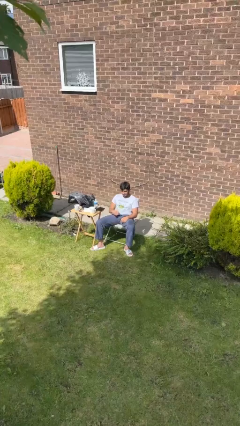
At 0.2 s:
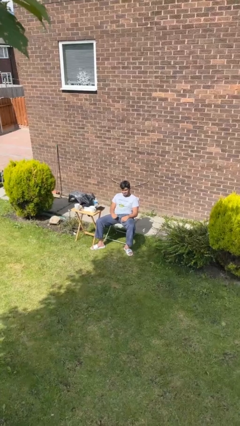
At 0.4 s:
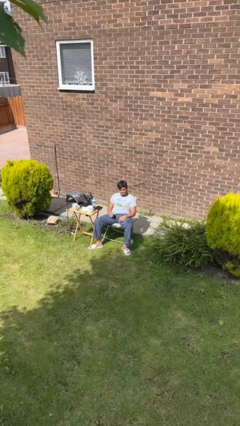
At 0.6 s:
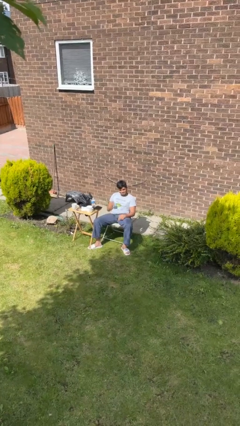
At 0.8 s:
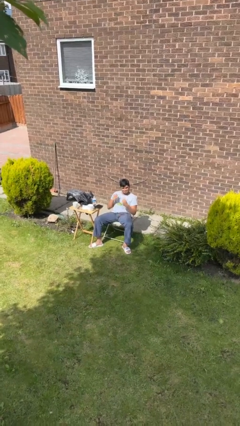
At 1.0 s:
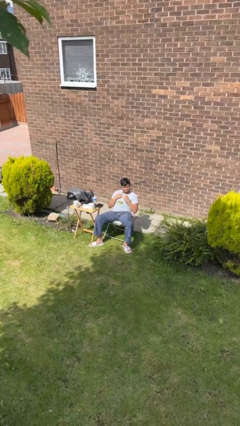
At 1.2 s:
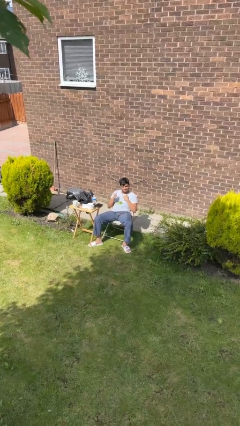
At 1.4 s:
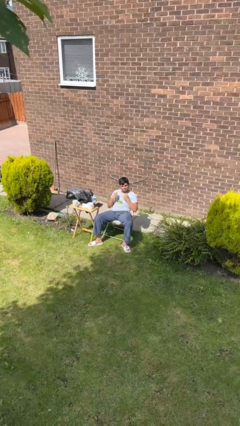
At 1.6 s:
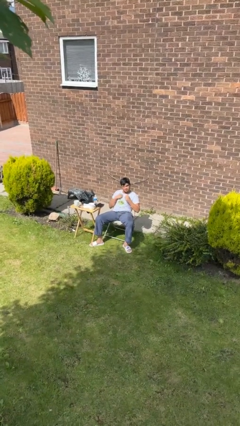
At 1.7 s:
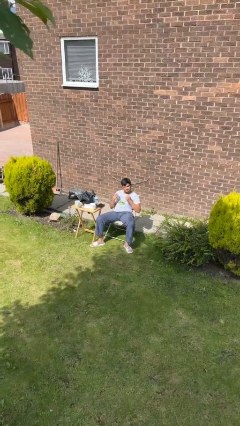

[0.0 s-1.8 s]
person drums on chest

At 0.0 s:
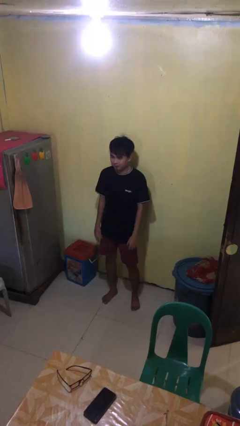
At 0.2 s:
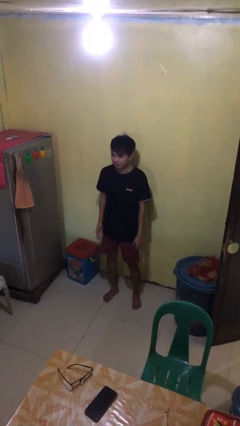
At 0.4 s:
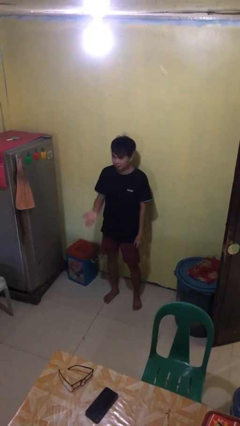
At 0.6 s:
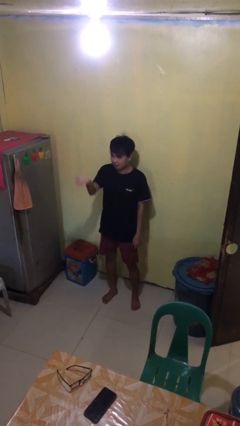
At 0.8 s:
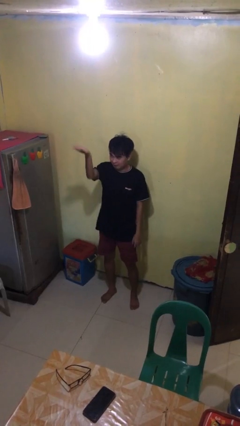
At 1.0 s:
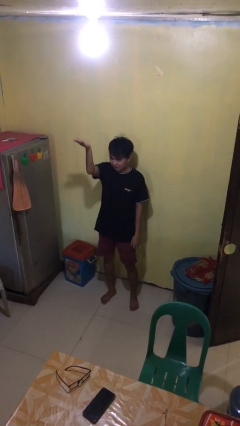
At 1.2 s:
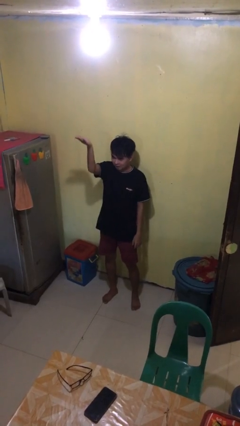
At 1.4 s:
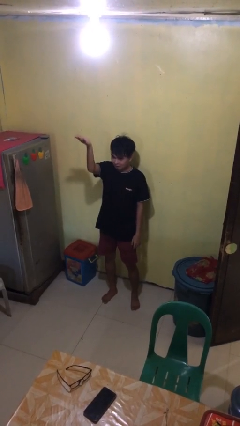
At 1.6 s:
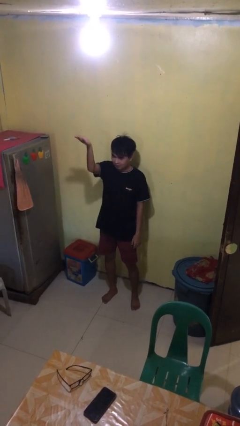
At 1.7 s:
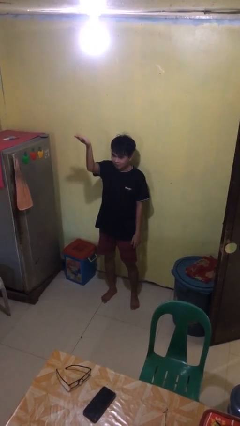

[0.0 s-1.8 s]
person gestures swipe up

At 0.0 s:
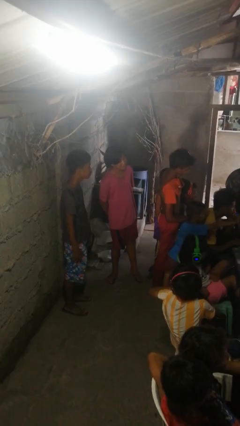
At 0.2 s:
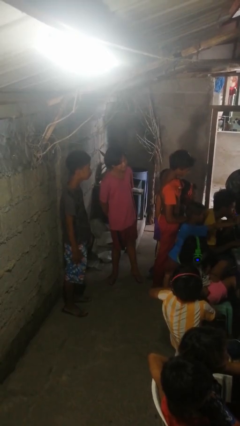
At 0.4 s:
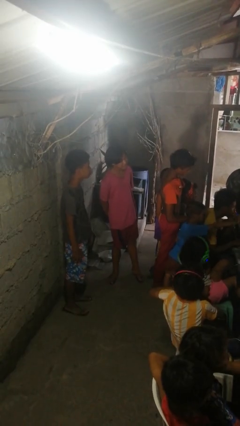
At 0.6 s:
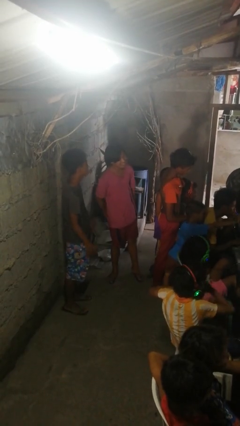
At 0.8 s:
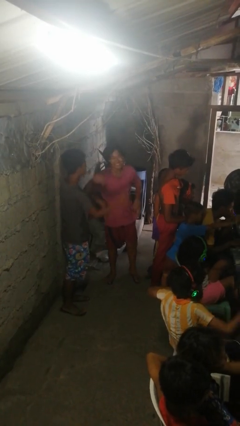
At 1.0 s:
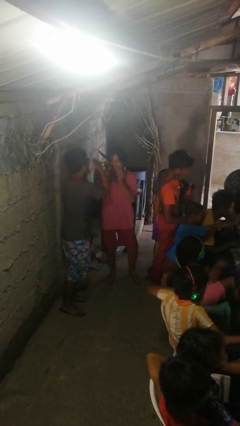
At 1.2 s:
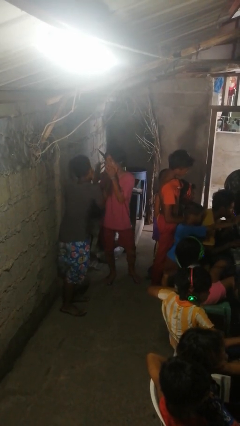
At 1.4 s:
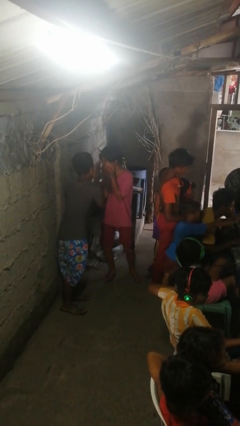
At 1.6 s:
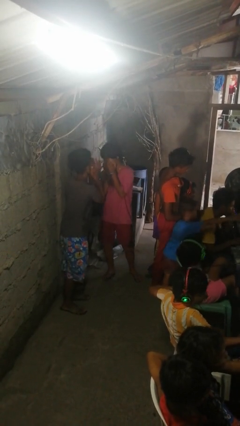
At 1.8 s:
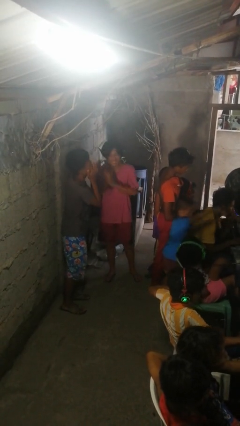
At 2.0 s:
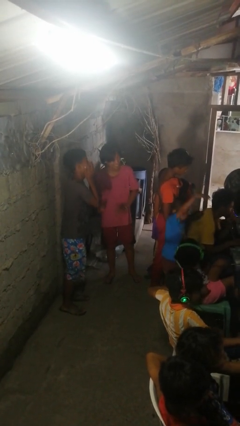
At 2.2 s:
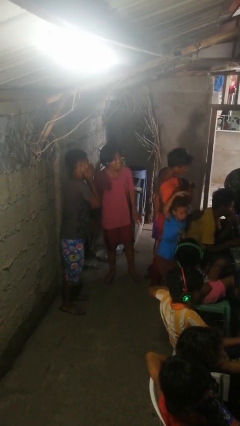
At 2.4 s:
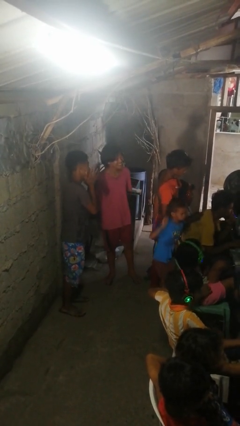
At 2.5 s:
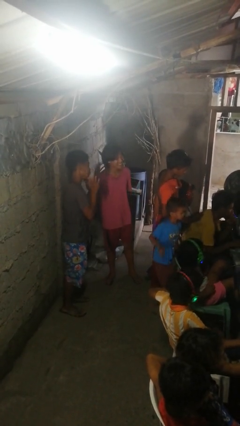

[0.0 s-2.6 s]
person laughs with person

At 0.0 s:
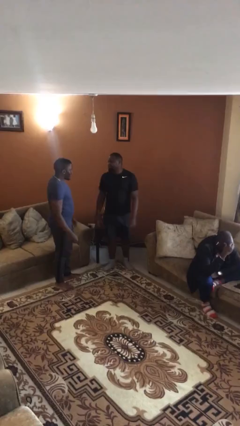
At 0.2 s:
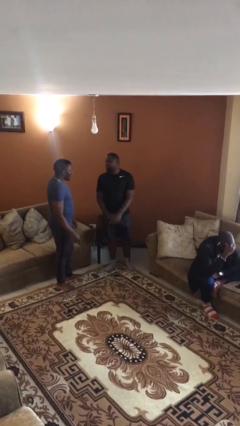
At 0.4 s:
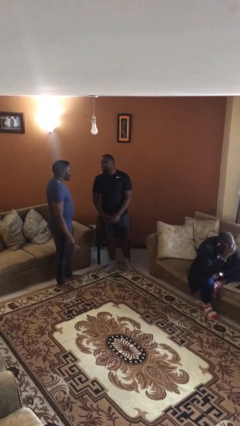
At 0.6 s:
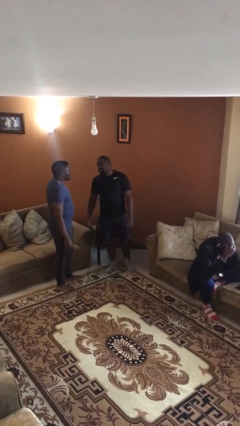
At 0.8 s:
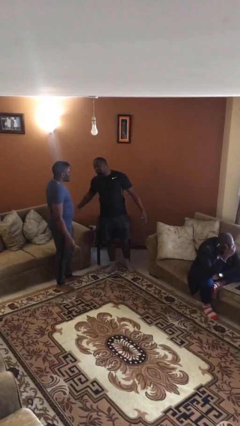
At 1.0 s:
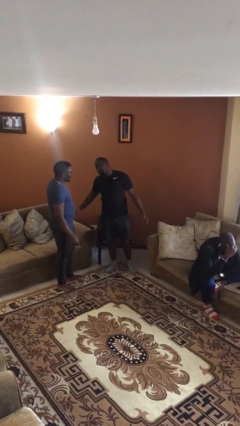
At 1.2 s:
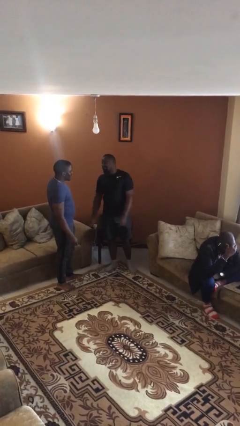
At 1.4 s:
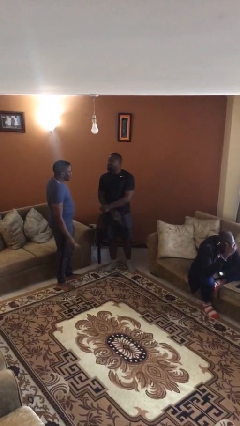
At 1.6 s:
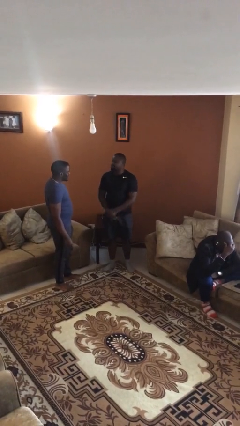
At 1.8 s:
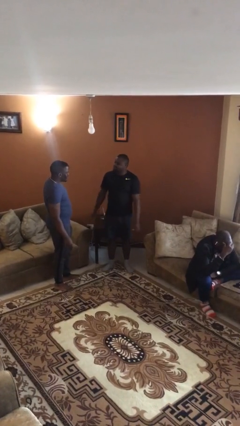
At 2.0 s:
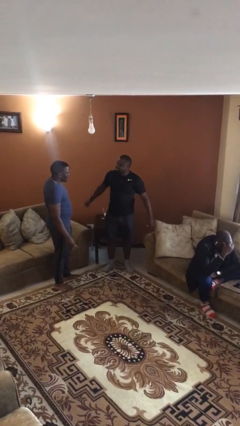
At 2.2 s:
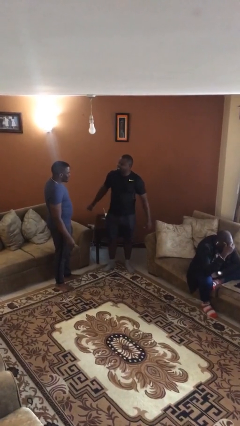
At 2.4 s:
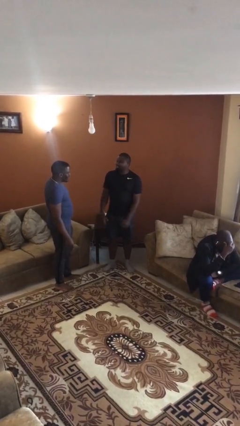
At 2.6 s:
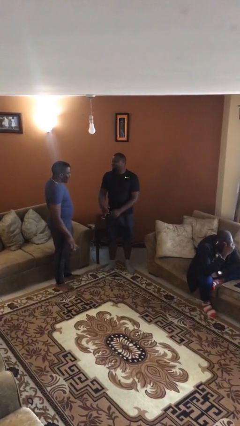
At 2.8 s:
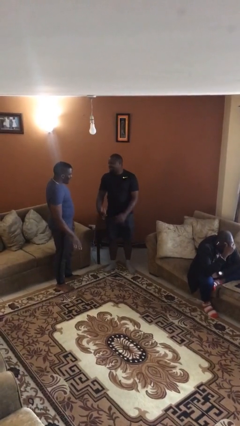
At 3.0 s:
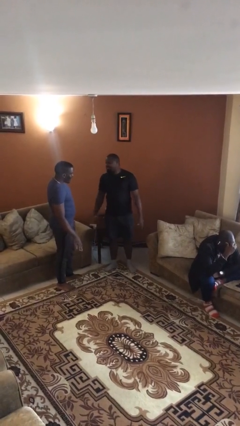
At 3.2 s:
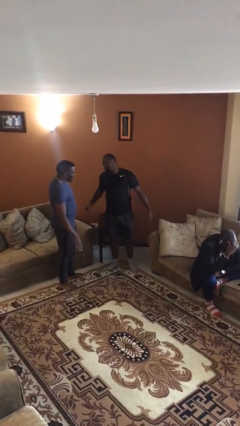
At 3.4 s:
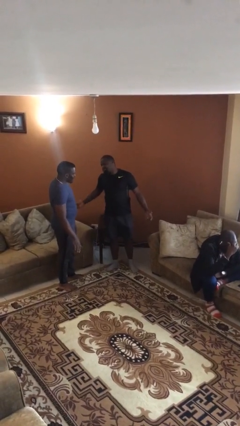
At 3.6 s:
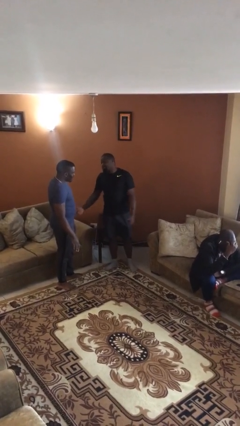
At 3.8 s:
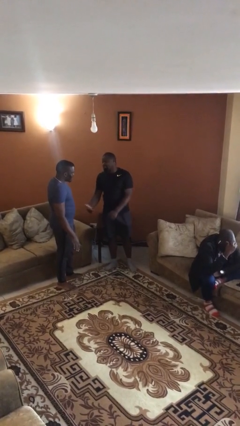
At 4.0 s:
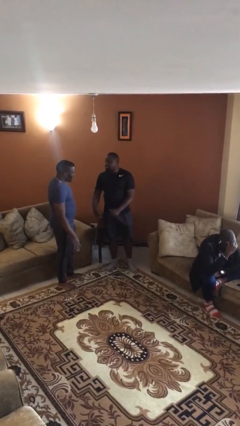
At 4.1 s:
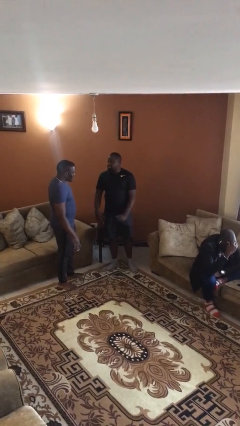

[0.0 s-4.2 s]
person talks to person

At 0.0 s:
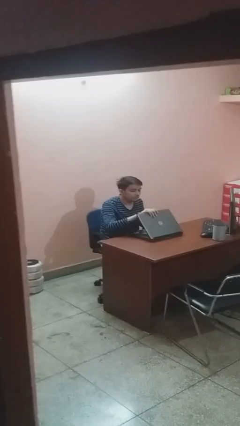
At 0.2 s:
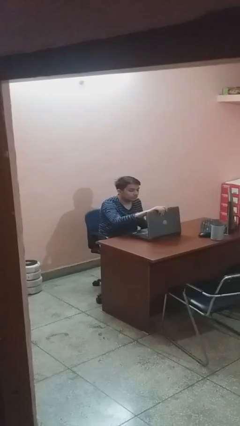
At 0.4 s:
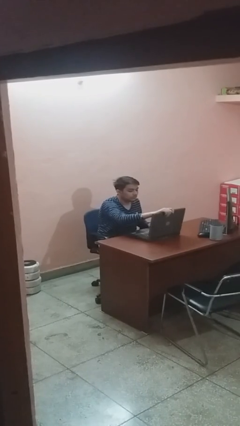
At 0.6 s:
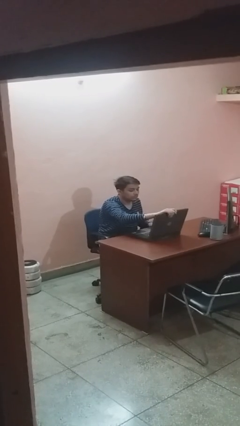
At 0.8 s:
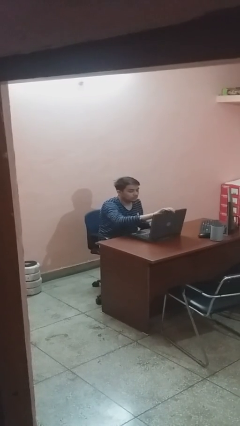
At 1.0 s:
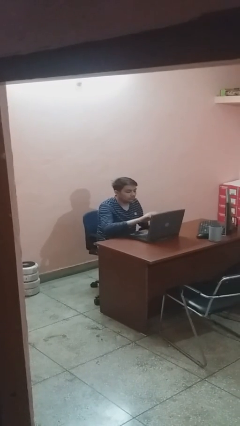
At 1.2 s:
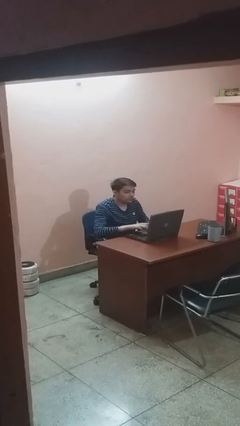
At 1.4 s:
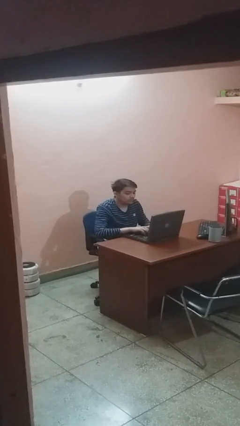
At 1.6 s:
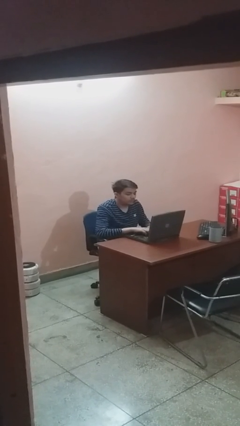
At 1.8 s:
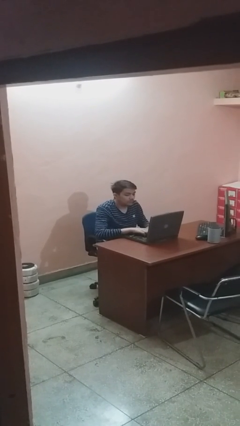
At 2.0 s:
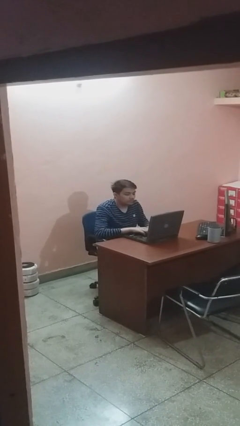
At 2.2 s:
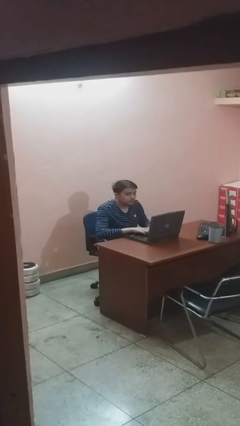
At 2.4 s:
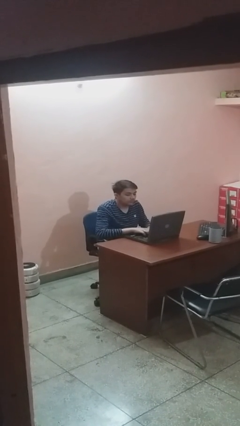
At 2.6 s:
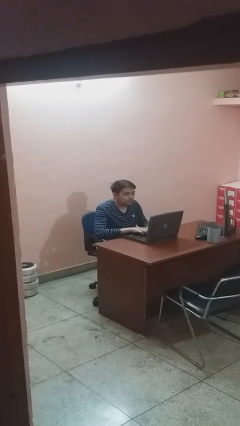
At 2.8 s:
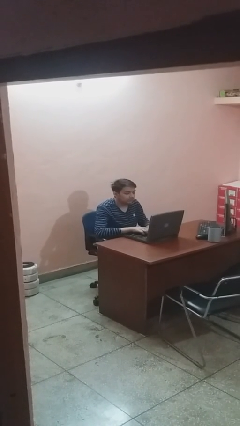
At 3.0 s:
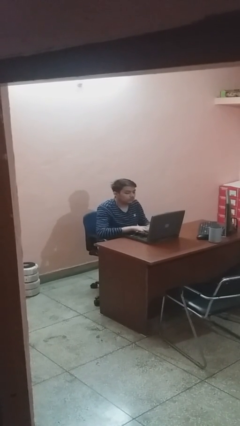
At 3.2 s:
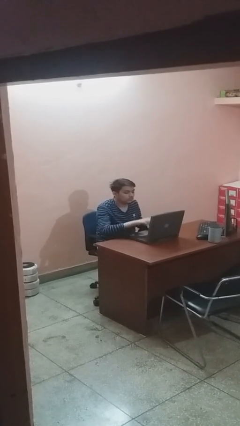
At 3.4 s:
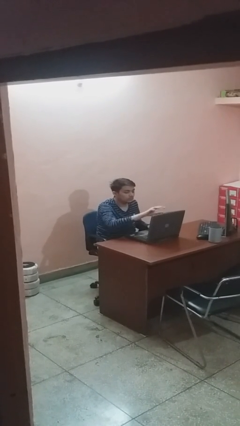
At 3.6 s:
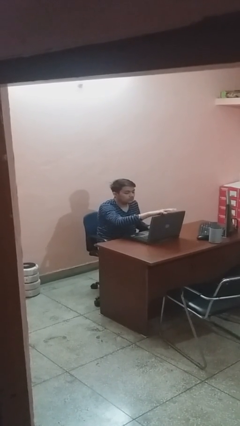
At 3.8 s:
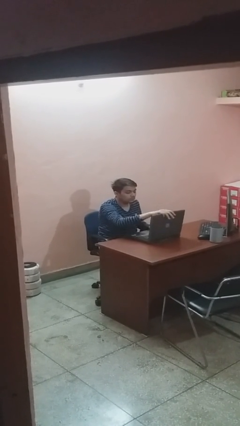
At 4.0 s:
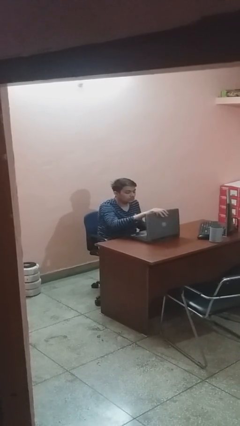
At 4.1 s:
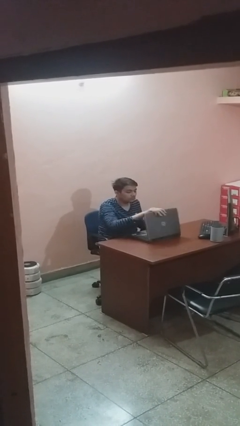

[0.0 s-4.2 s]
person interacts with laptop

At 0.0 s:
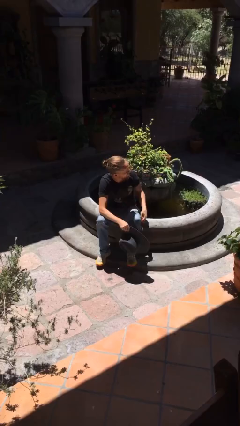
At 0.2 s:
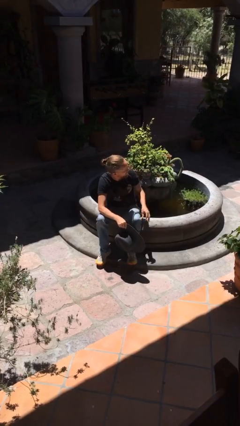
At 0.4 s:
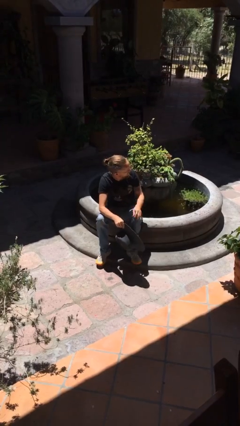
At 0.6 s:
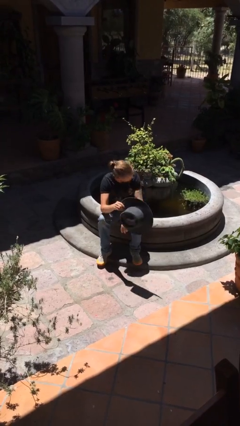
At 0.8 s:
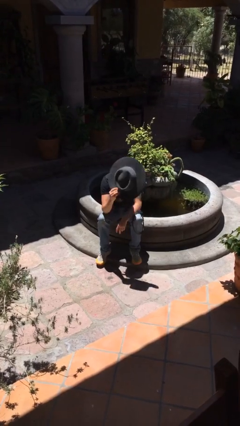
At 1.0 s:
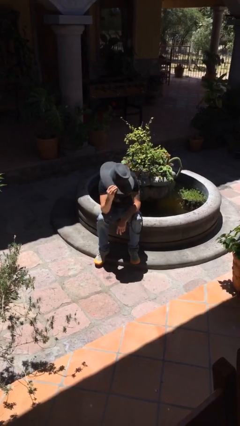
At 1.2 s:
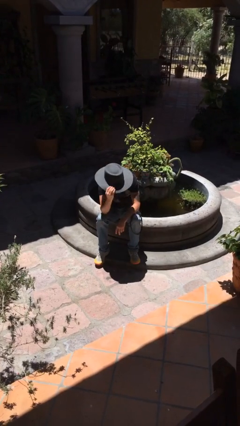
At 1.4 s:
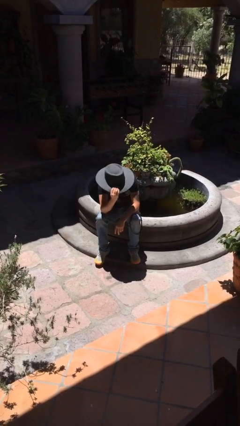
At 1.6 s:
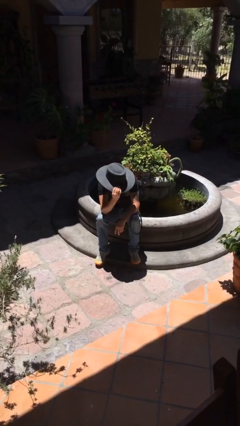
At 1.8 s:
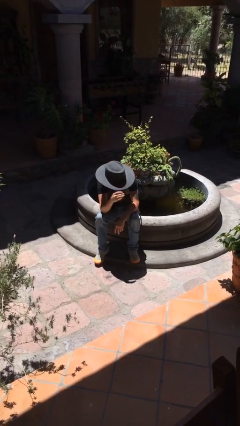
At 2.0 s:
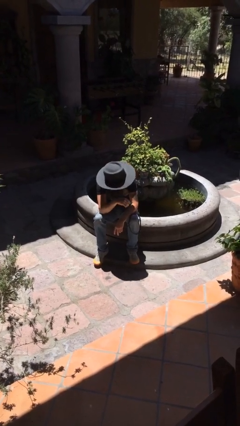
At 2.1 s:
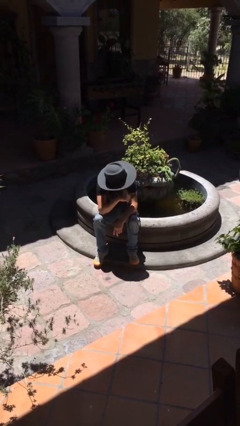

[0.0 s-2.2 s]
person puts on hat

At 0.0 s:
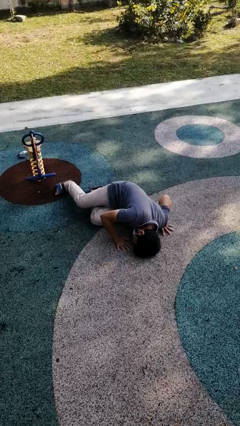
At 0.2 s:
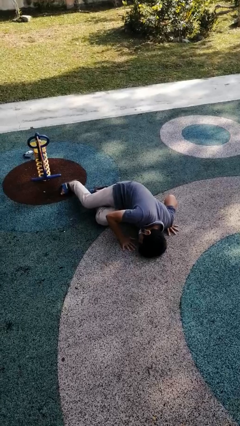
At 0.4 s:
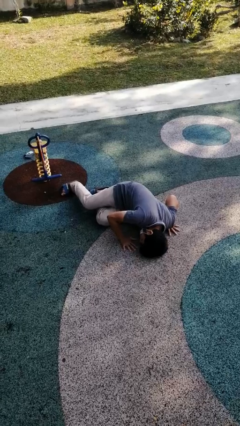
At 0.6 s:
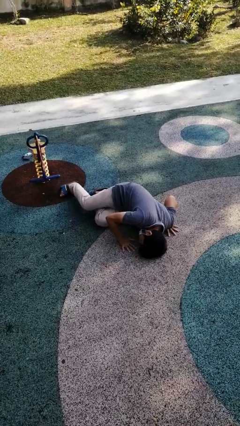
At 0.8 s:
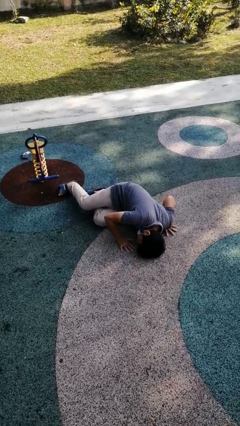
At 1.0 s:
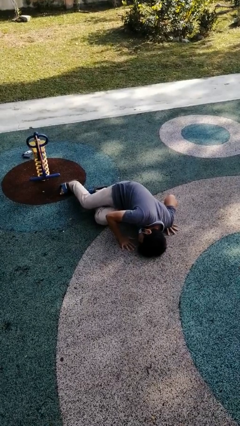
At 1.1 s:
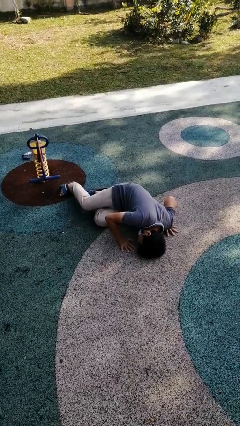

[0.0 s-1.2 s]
person lies down on floor
